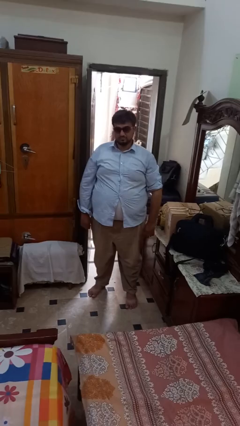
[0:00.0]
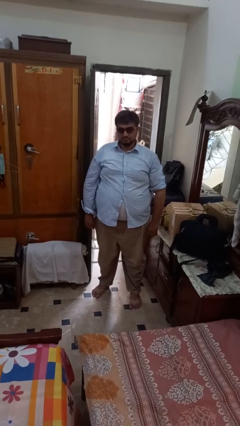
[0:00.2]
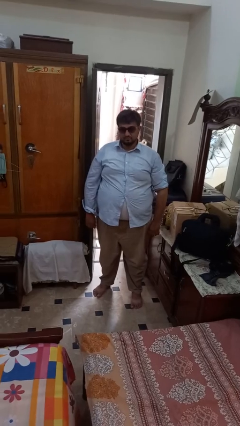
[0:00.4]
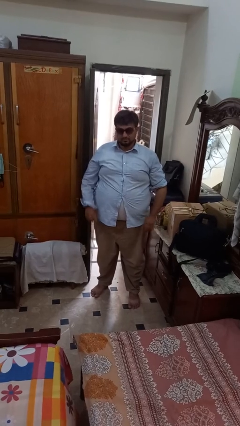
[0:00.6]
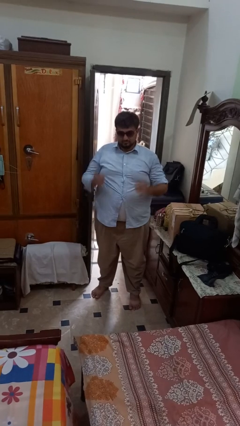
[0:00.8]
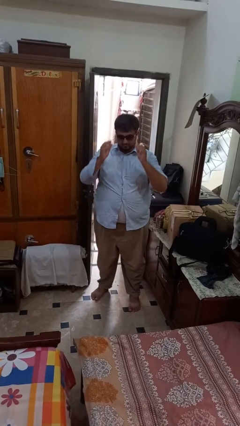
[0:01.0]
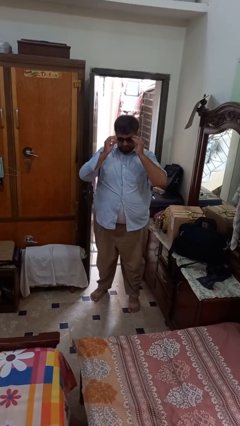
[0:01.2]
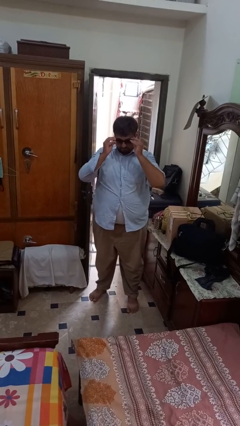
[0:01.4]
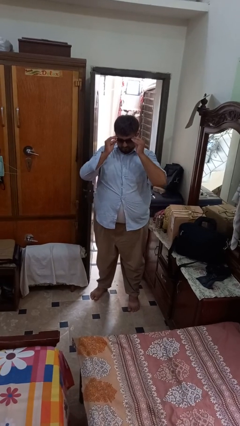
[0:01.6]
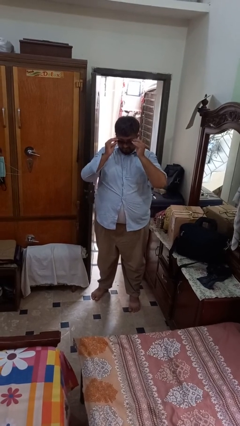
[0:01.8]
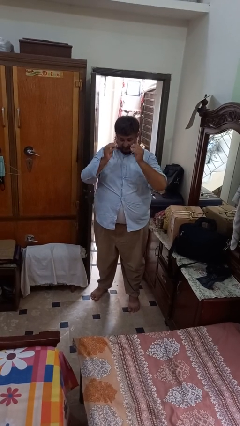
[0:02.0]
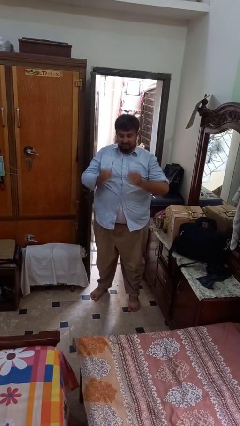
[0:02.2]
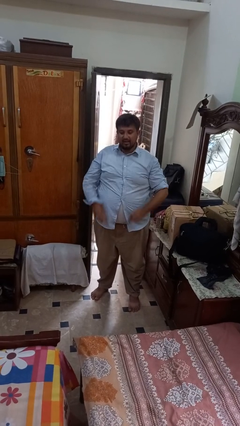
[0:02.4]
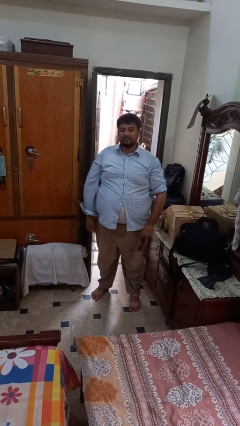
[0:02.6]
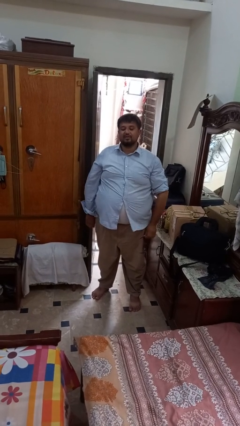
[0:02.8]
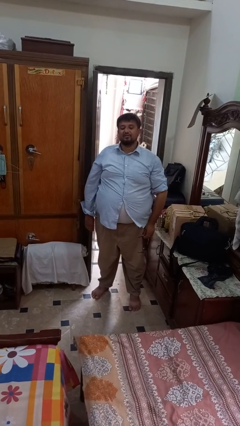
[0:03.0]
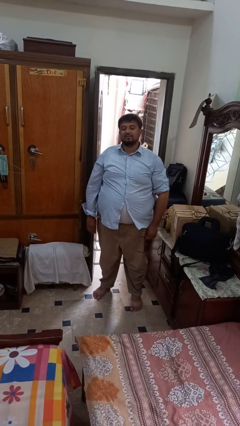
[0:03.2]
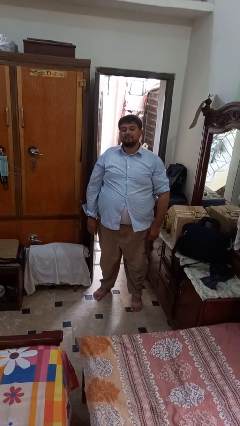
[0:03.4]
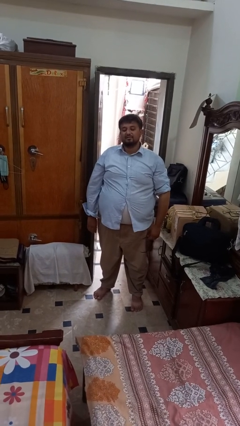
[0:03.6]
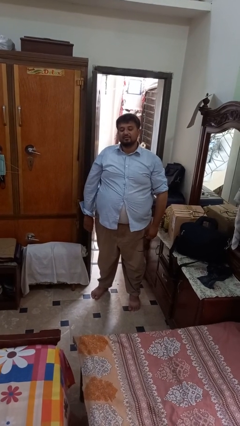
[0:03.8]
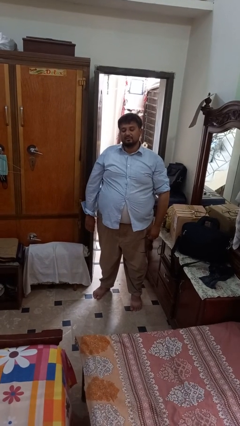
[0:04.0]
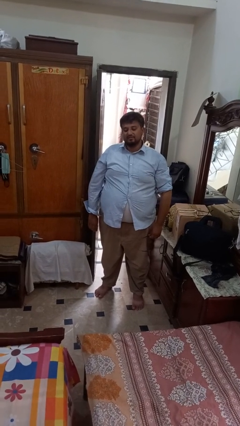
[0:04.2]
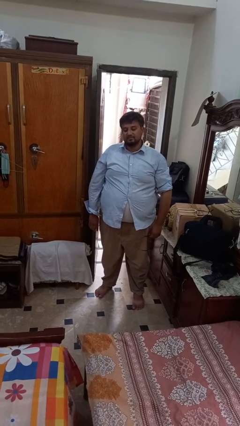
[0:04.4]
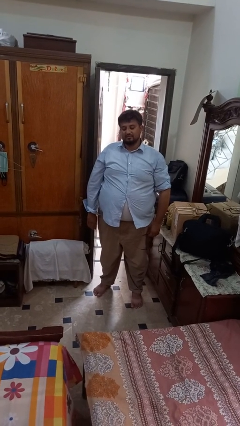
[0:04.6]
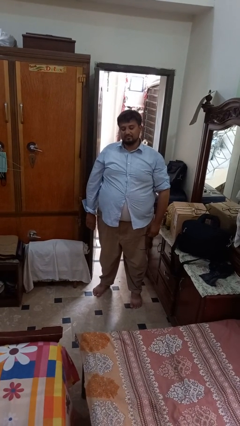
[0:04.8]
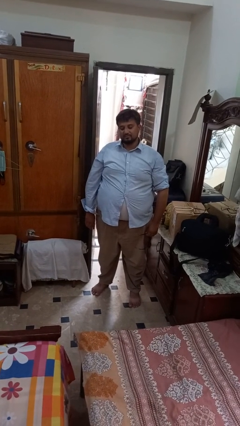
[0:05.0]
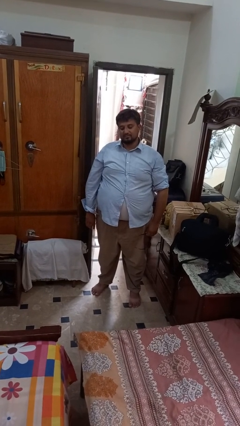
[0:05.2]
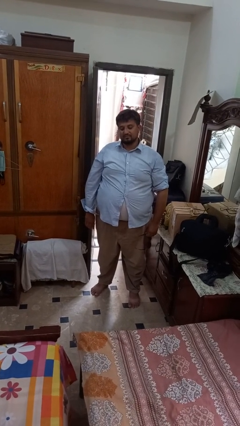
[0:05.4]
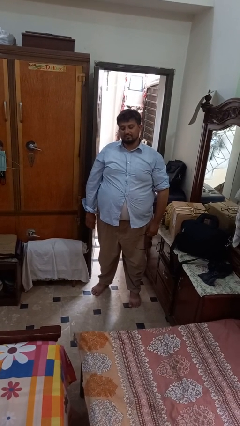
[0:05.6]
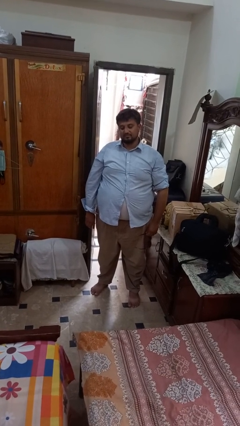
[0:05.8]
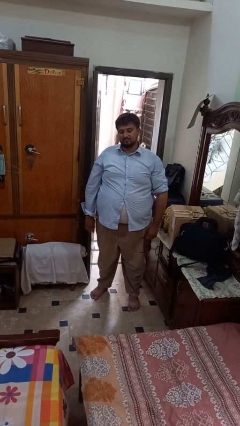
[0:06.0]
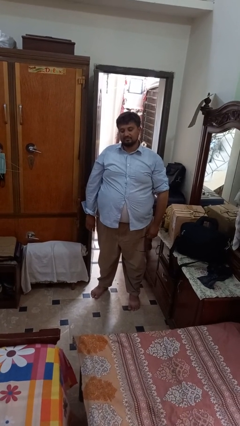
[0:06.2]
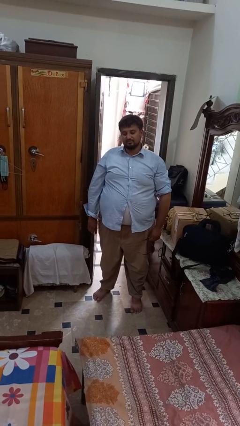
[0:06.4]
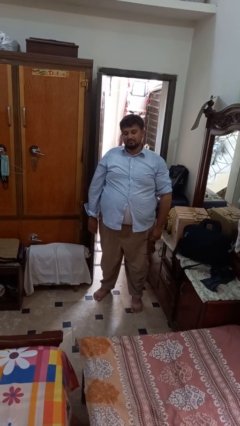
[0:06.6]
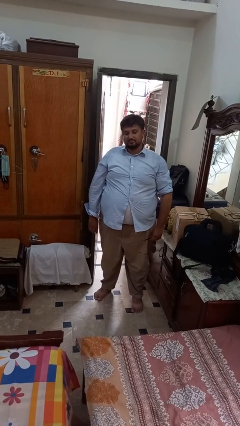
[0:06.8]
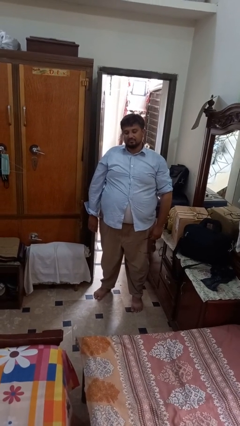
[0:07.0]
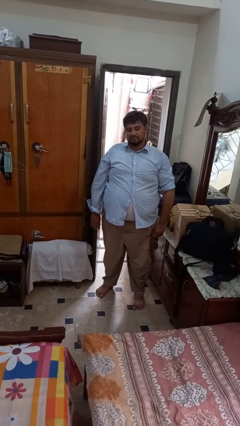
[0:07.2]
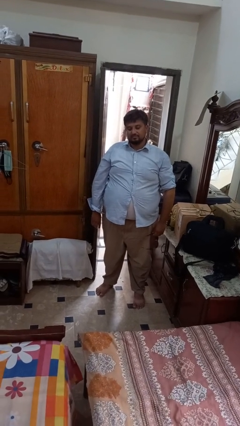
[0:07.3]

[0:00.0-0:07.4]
person takes off sunglasses

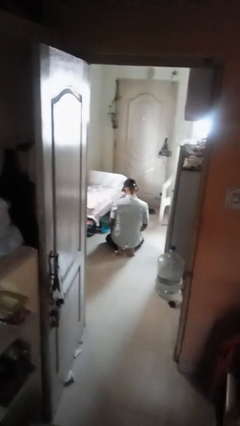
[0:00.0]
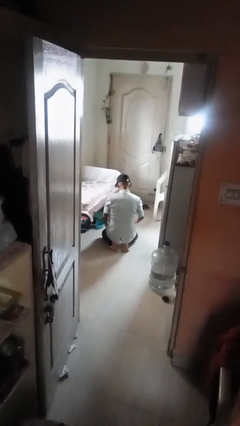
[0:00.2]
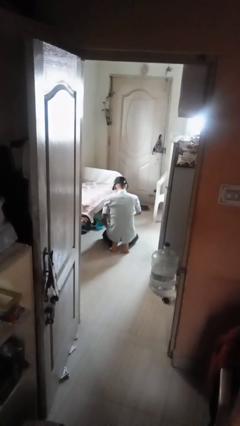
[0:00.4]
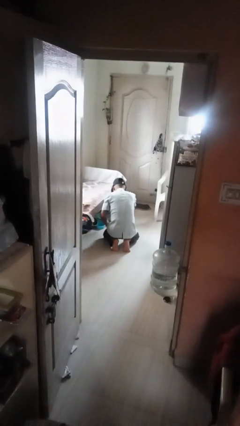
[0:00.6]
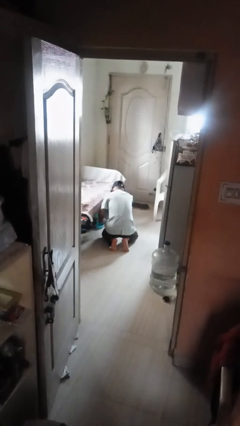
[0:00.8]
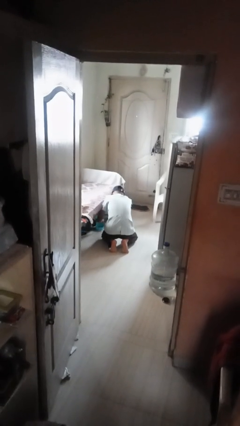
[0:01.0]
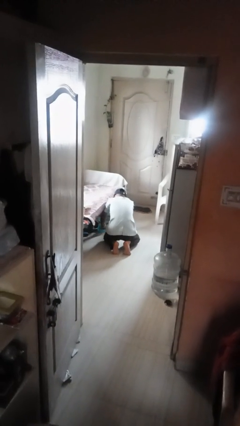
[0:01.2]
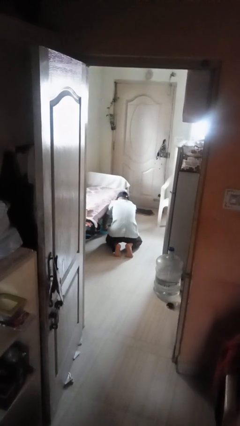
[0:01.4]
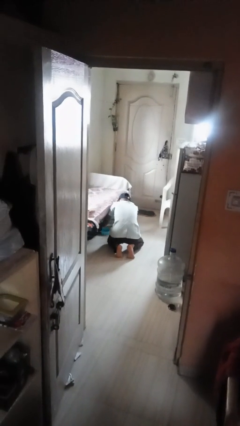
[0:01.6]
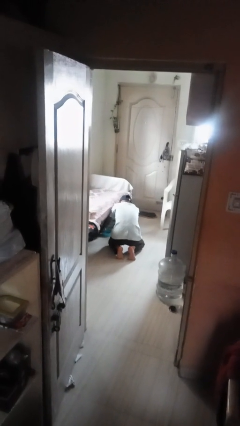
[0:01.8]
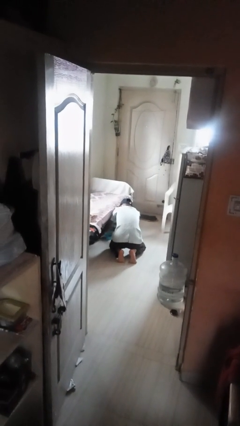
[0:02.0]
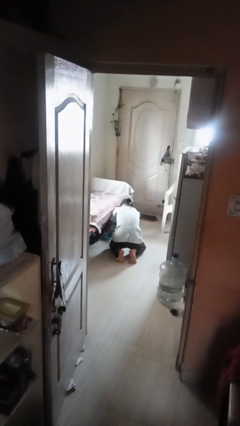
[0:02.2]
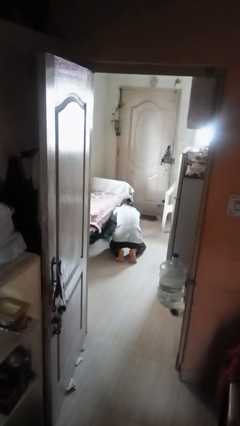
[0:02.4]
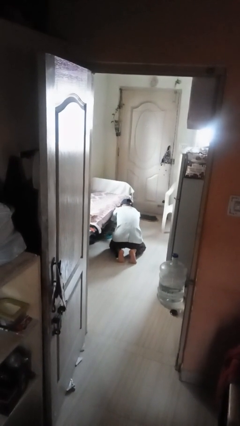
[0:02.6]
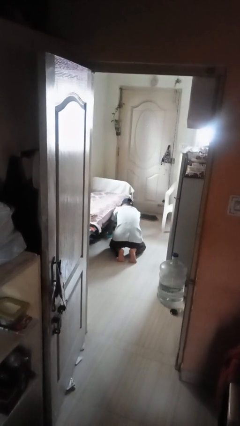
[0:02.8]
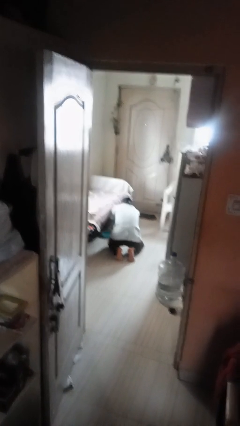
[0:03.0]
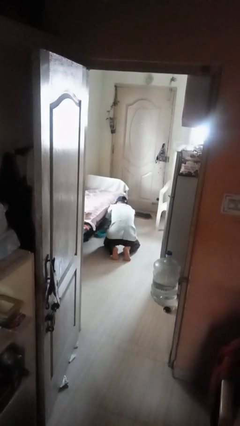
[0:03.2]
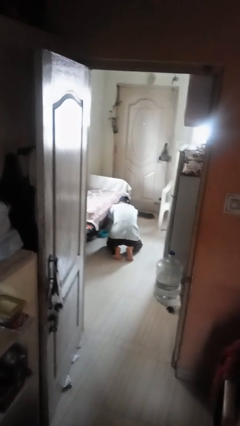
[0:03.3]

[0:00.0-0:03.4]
person searches under bed

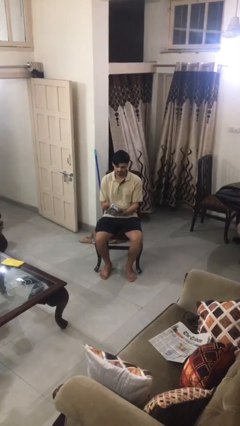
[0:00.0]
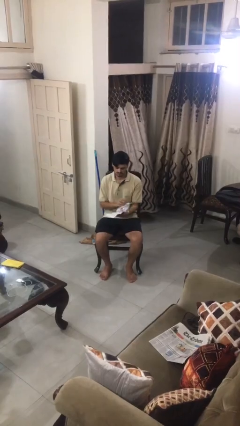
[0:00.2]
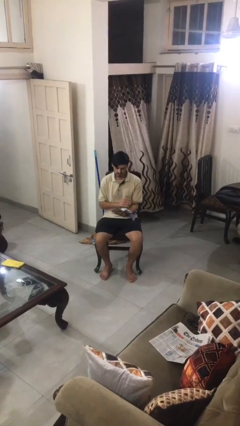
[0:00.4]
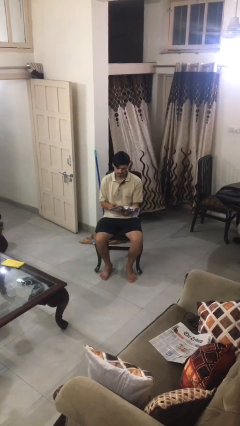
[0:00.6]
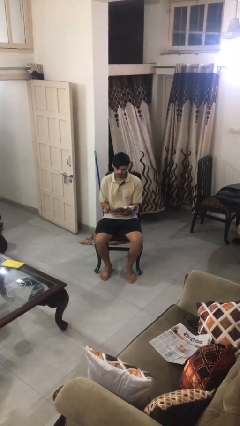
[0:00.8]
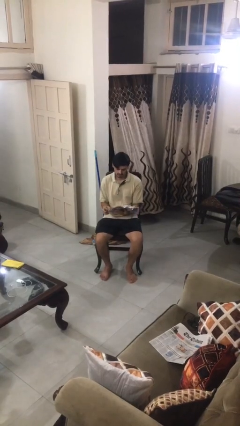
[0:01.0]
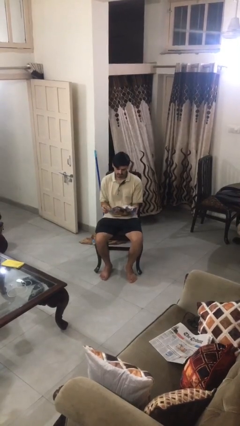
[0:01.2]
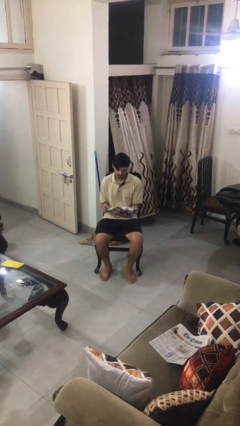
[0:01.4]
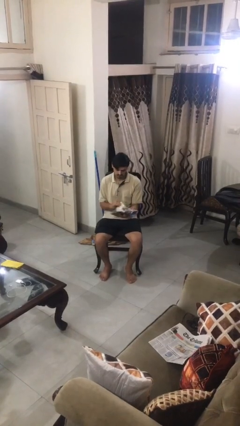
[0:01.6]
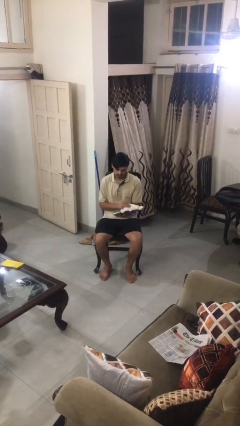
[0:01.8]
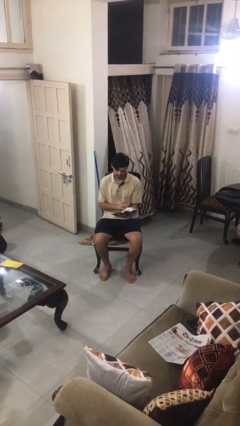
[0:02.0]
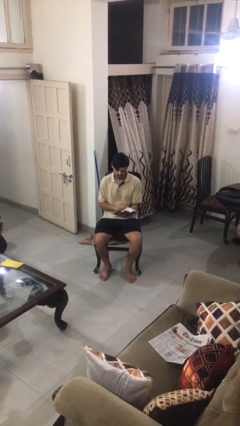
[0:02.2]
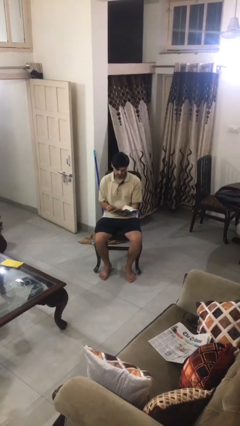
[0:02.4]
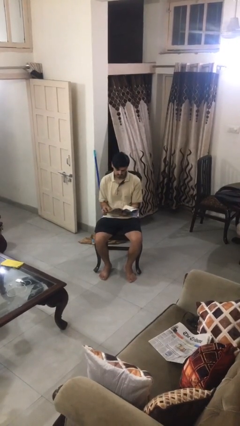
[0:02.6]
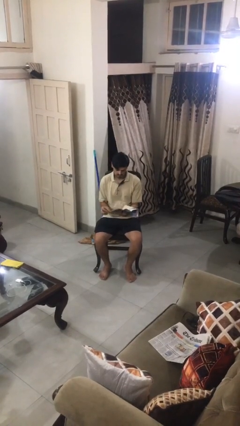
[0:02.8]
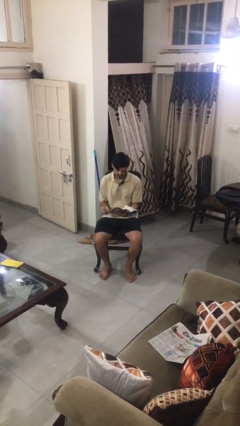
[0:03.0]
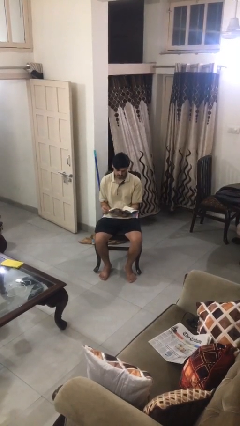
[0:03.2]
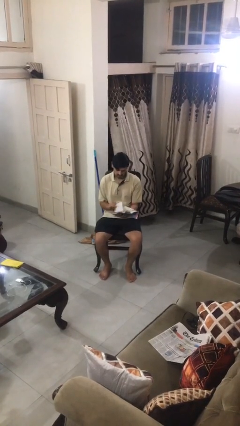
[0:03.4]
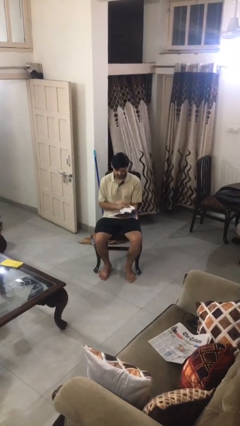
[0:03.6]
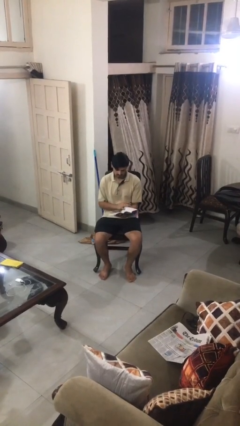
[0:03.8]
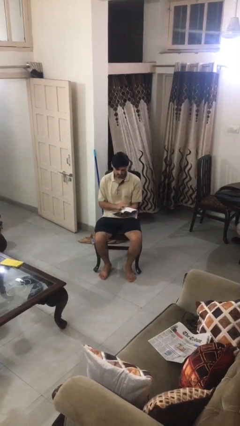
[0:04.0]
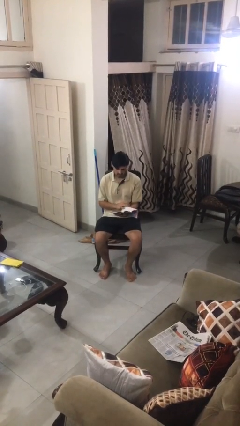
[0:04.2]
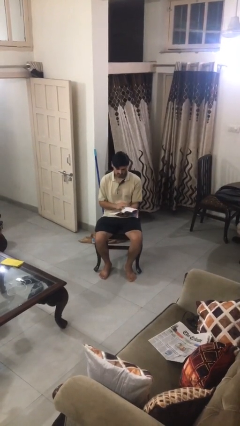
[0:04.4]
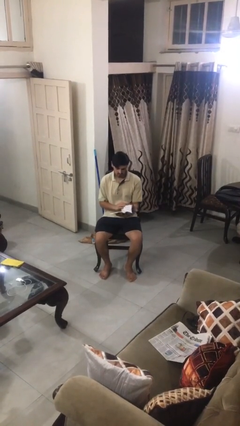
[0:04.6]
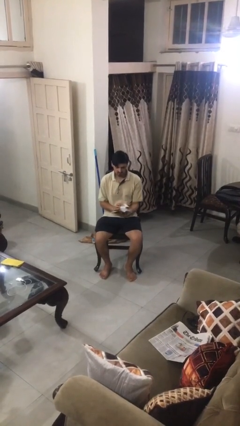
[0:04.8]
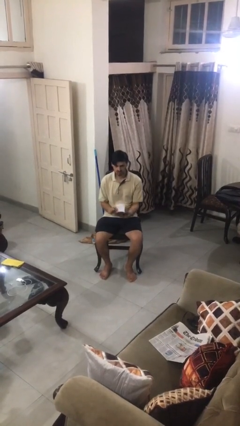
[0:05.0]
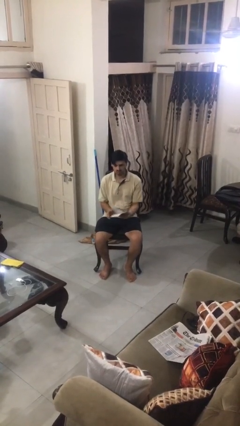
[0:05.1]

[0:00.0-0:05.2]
person reads magazine

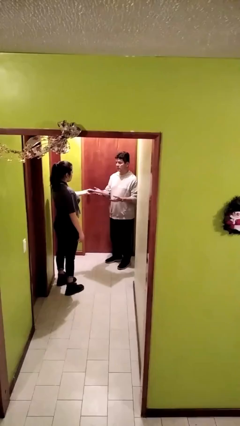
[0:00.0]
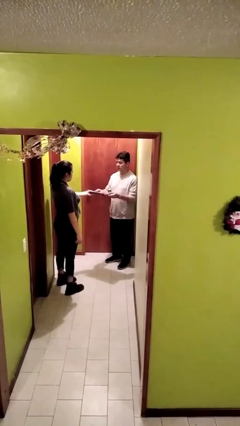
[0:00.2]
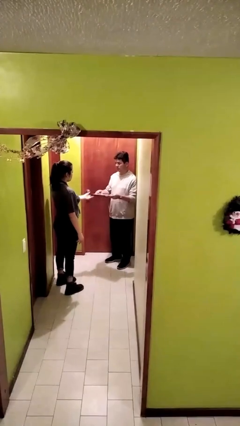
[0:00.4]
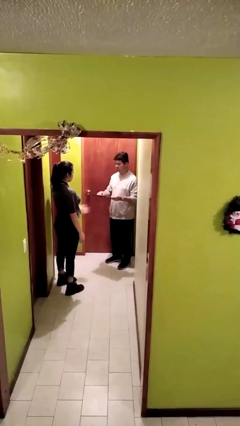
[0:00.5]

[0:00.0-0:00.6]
person transfers object to person

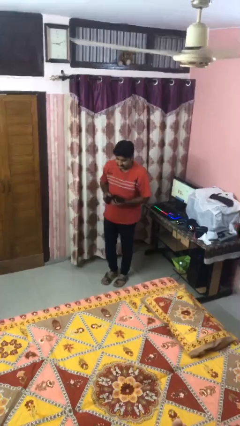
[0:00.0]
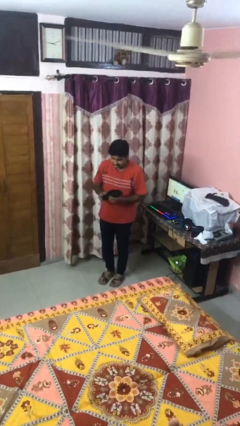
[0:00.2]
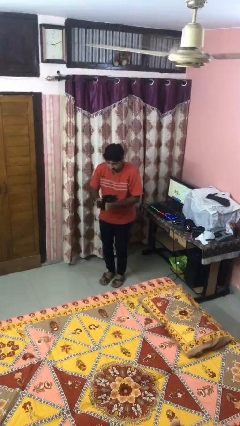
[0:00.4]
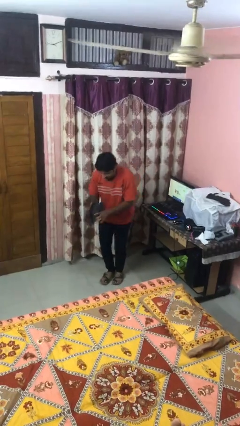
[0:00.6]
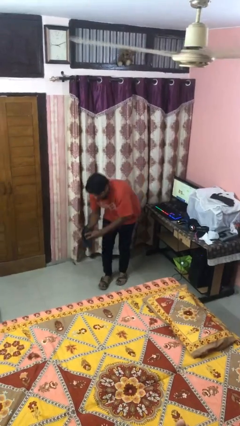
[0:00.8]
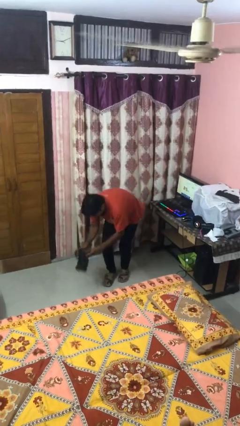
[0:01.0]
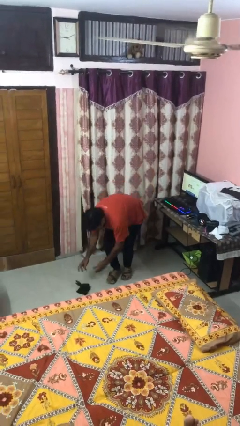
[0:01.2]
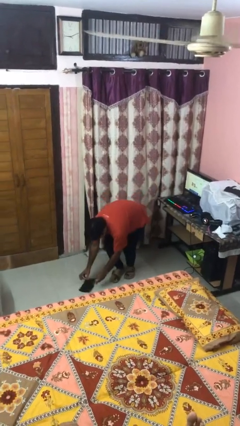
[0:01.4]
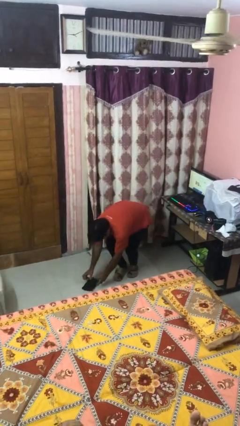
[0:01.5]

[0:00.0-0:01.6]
person drops object
